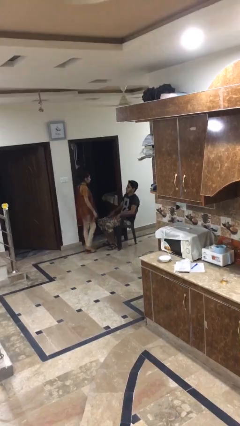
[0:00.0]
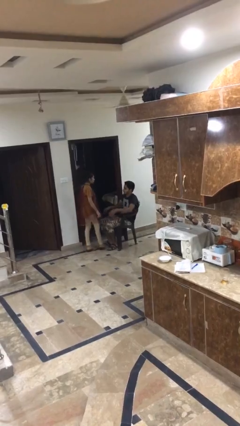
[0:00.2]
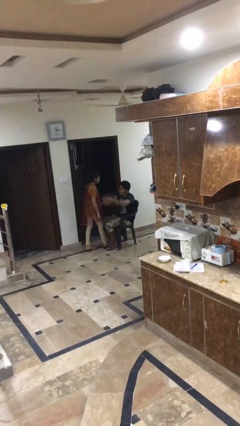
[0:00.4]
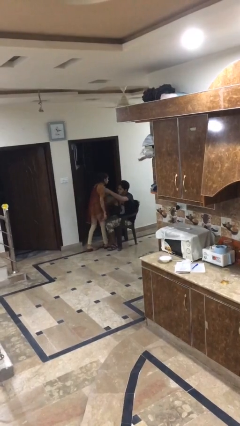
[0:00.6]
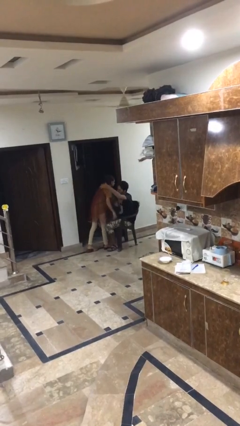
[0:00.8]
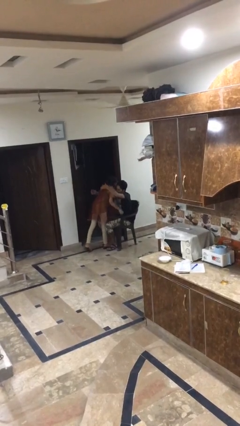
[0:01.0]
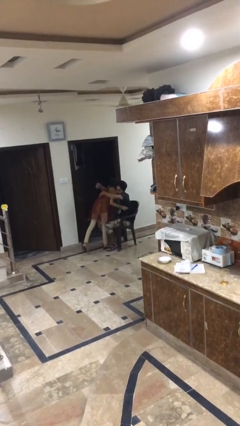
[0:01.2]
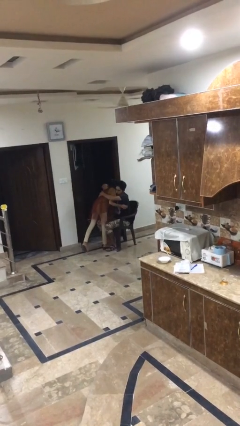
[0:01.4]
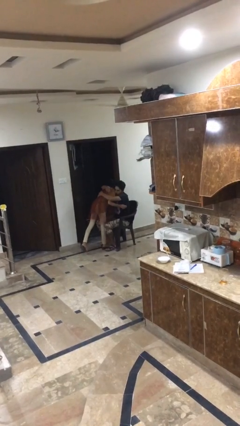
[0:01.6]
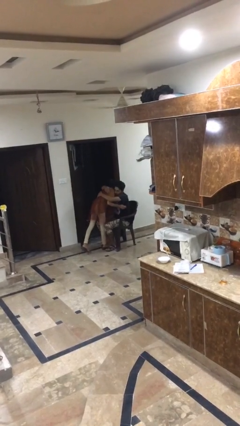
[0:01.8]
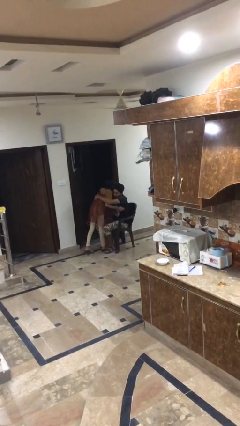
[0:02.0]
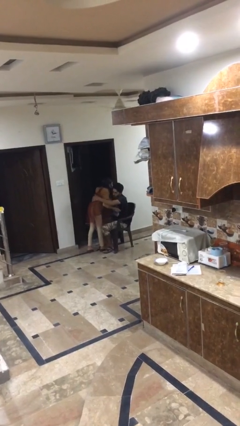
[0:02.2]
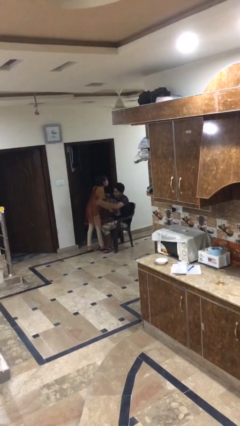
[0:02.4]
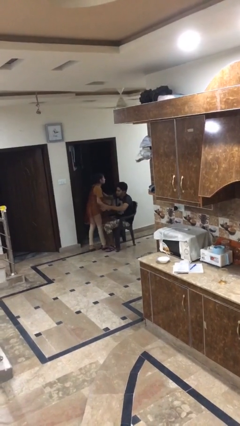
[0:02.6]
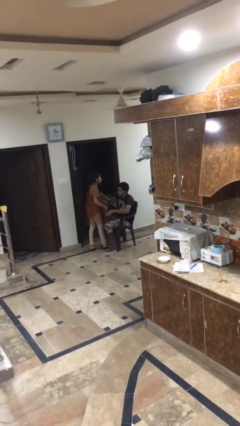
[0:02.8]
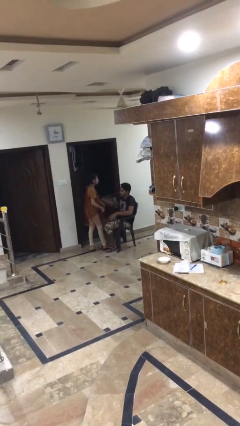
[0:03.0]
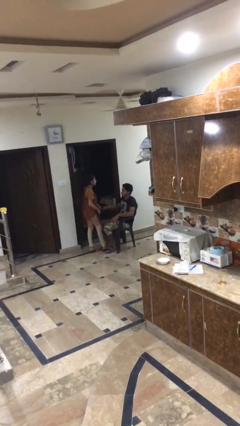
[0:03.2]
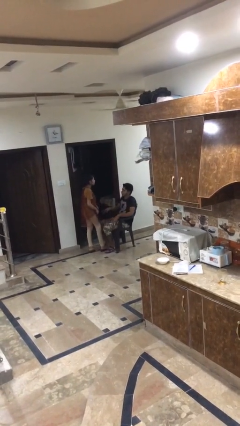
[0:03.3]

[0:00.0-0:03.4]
person embraces person

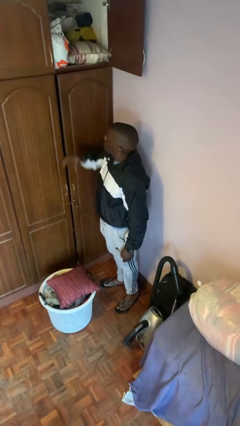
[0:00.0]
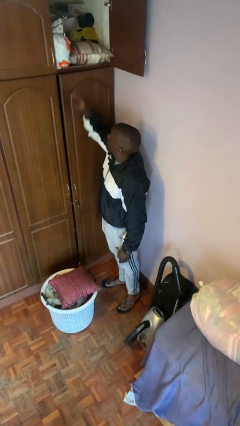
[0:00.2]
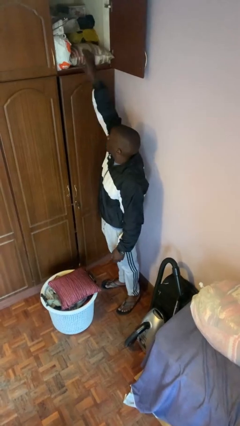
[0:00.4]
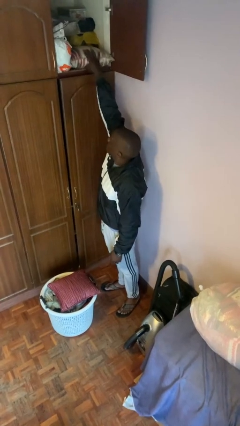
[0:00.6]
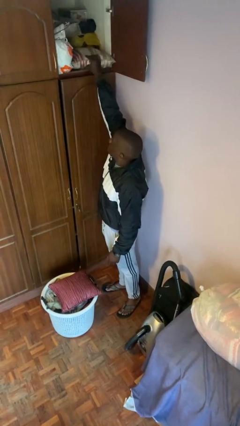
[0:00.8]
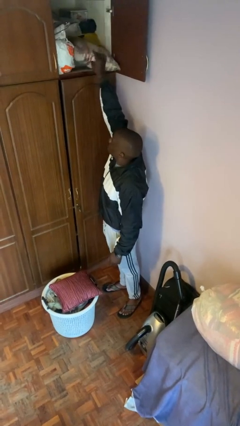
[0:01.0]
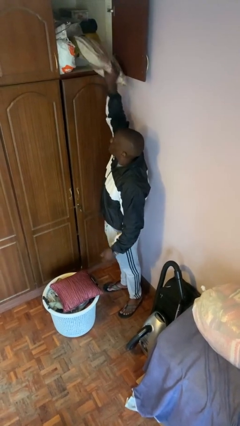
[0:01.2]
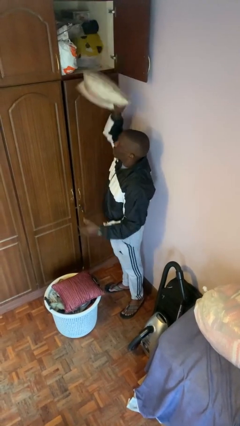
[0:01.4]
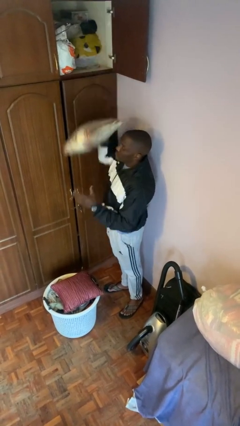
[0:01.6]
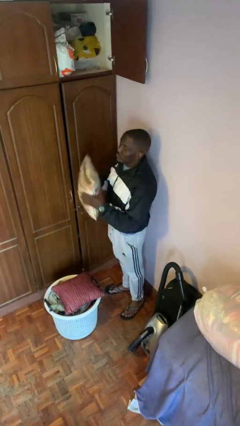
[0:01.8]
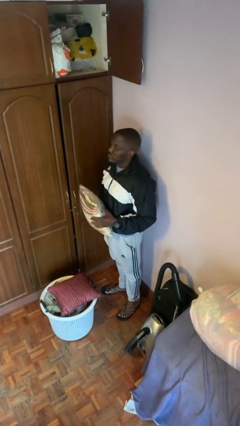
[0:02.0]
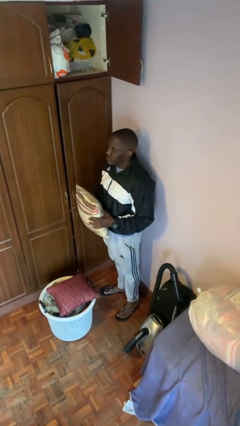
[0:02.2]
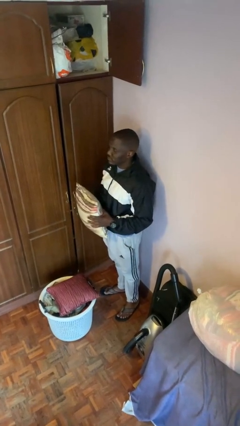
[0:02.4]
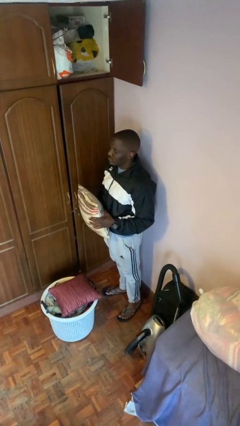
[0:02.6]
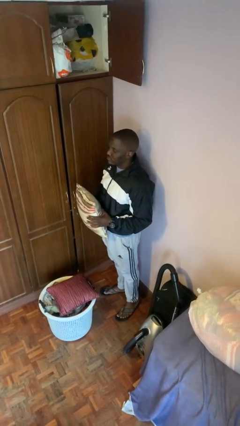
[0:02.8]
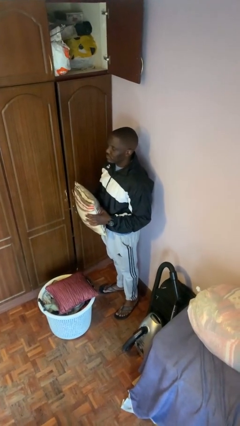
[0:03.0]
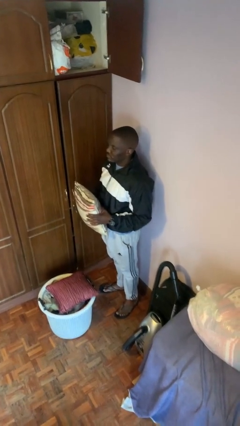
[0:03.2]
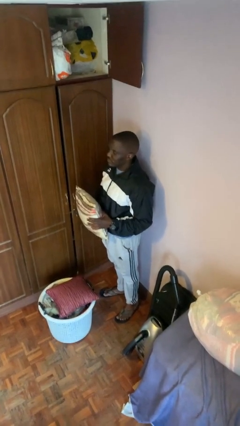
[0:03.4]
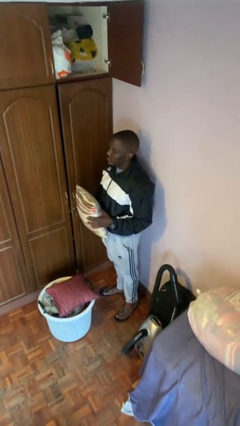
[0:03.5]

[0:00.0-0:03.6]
person picks up object from shelf

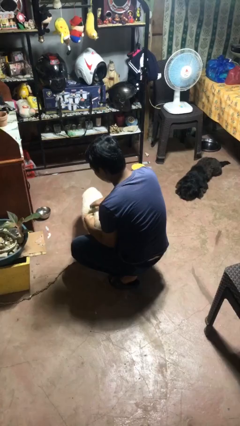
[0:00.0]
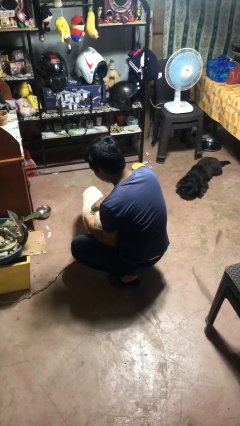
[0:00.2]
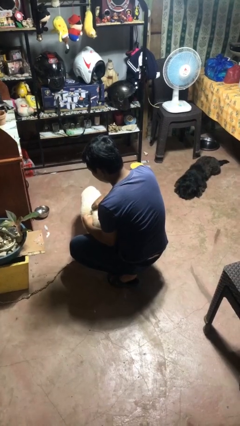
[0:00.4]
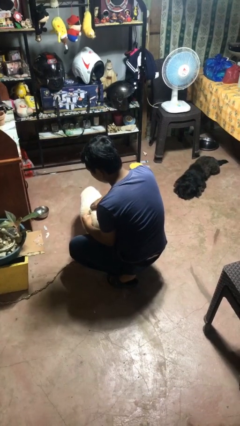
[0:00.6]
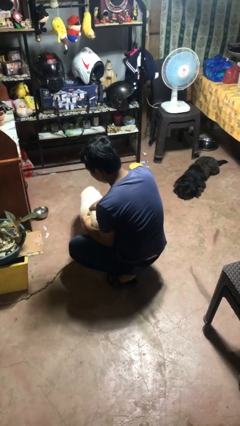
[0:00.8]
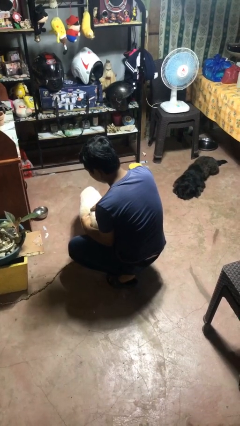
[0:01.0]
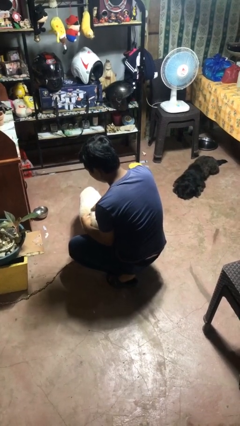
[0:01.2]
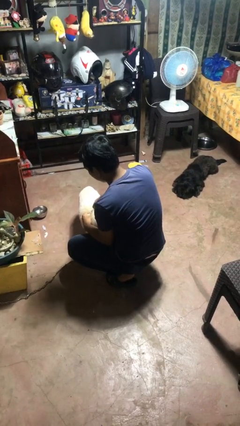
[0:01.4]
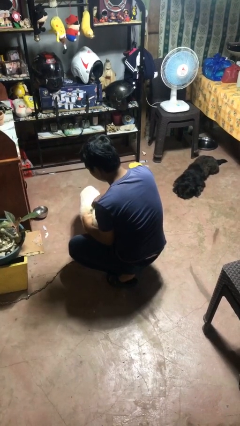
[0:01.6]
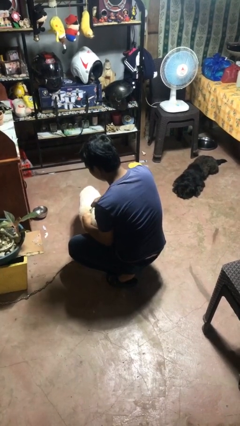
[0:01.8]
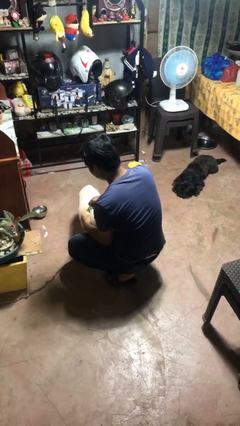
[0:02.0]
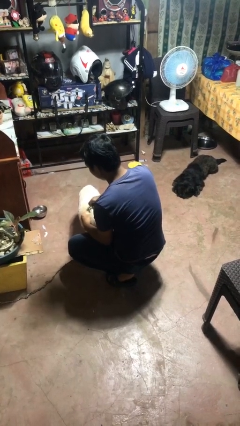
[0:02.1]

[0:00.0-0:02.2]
person attaches leash to dog

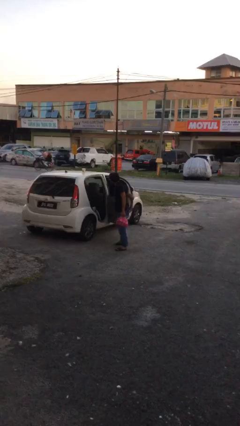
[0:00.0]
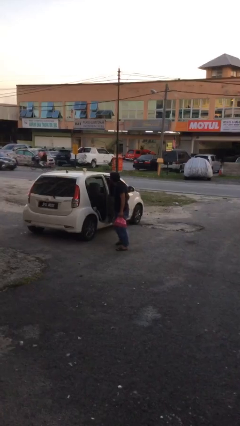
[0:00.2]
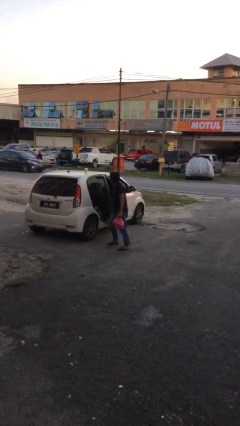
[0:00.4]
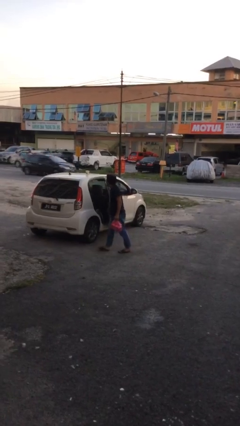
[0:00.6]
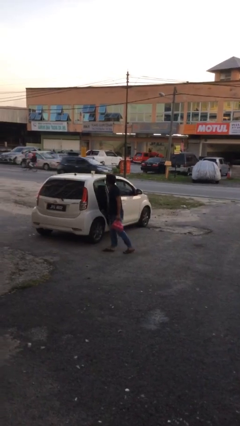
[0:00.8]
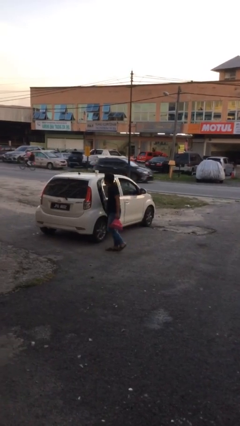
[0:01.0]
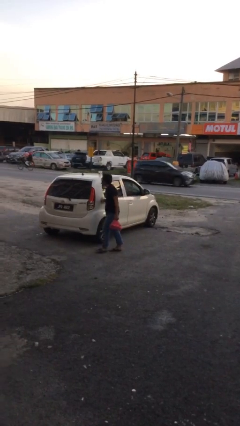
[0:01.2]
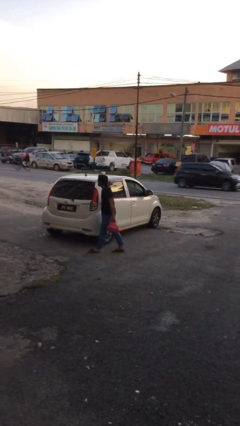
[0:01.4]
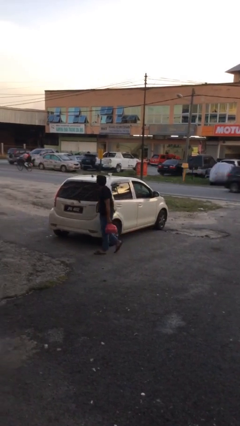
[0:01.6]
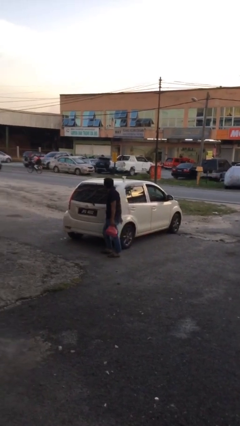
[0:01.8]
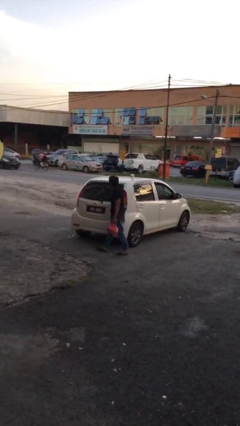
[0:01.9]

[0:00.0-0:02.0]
person closes car door

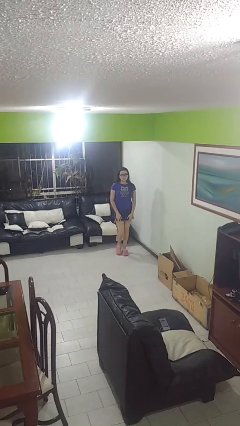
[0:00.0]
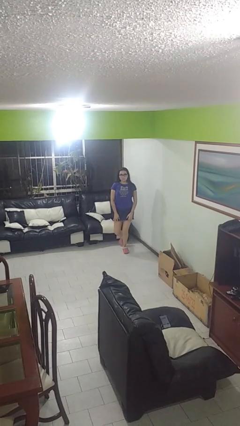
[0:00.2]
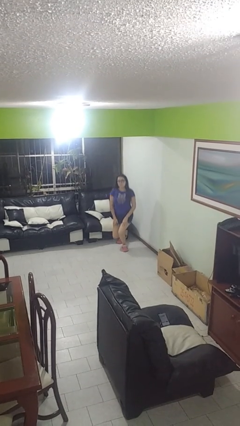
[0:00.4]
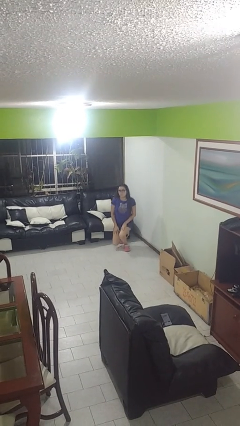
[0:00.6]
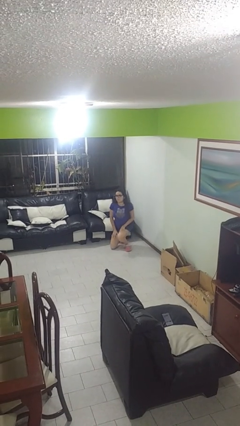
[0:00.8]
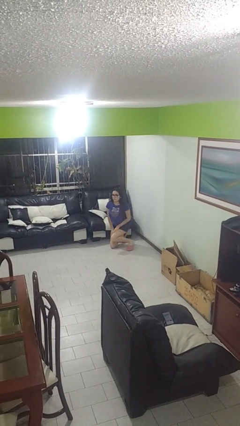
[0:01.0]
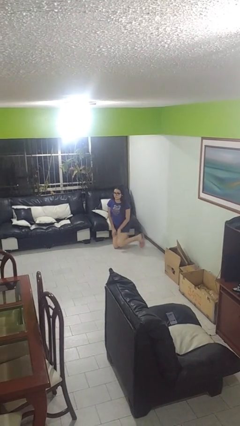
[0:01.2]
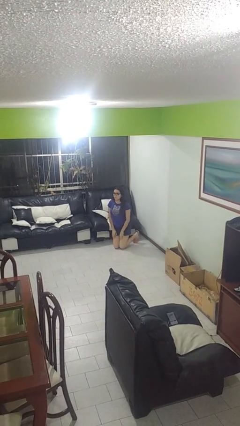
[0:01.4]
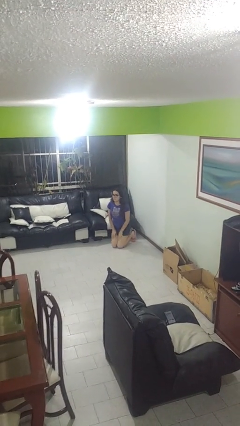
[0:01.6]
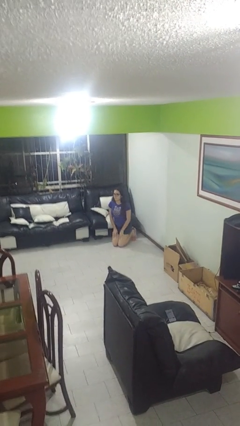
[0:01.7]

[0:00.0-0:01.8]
person kneels

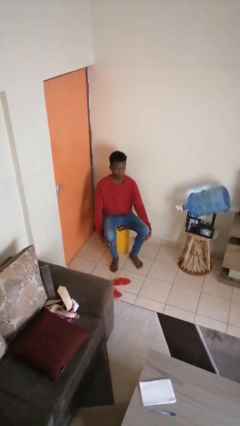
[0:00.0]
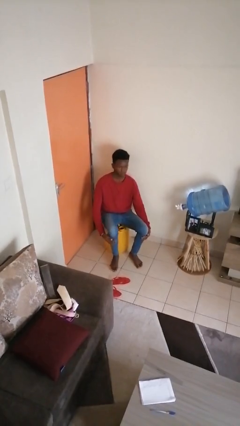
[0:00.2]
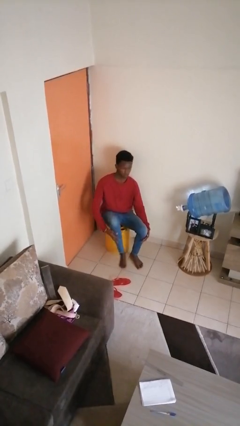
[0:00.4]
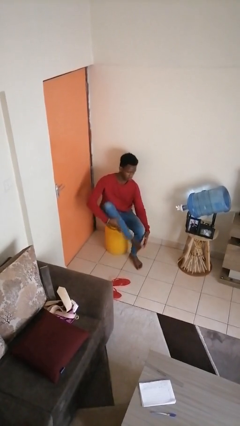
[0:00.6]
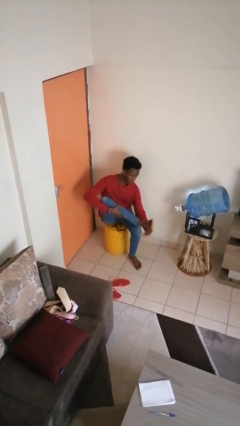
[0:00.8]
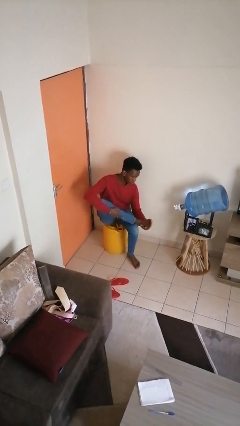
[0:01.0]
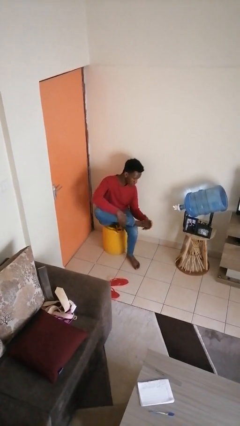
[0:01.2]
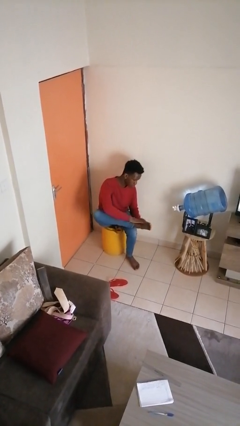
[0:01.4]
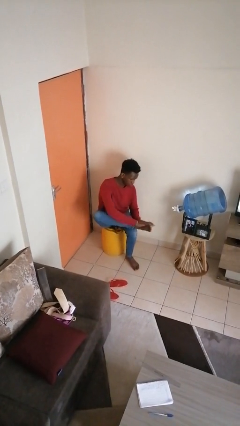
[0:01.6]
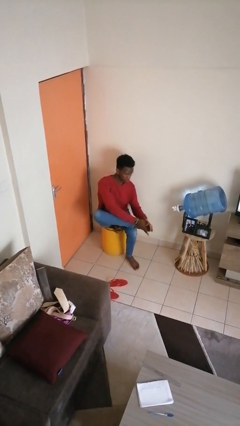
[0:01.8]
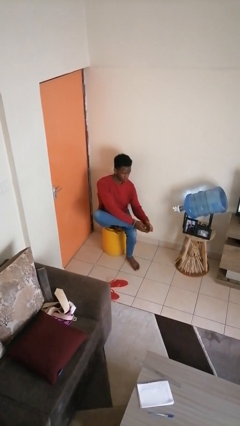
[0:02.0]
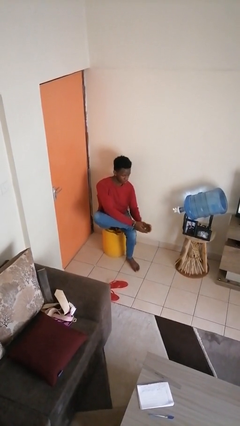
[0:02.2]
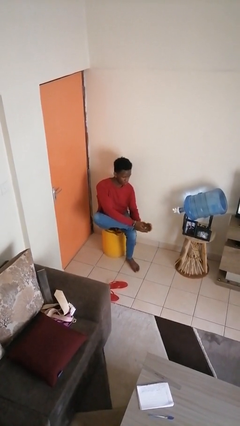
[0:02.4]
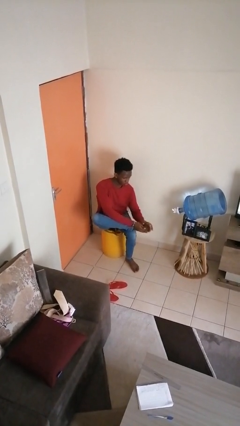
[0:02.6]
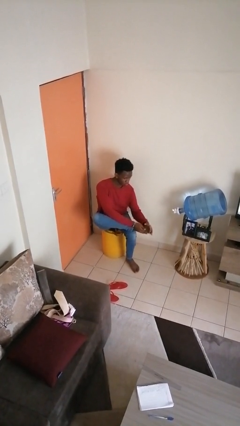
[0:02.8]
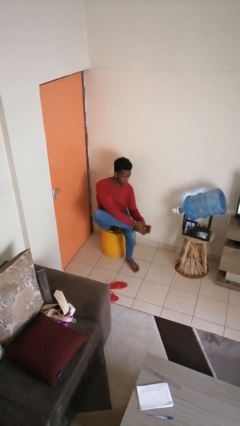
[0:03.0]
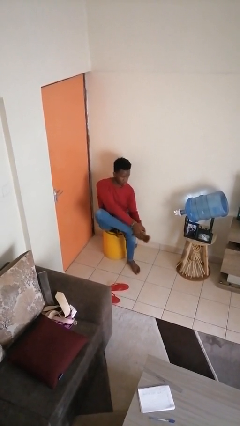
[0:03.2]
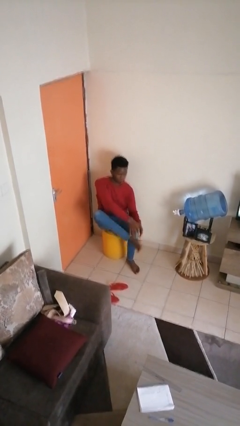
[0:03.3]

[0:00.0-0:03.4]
person rubs foot

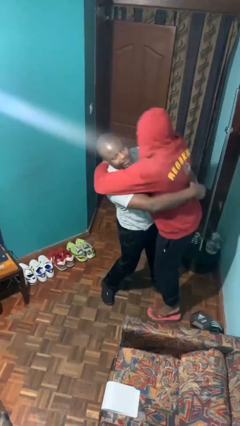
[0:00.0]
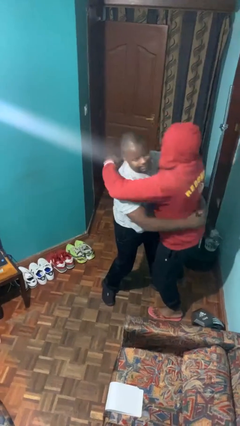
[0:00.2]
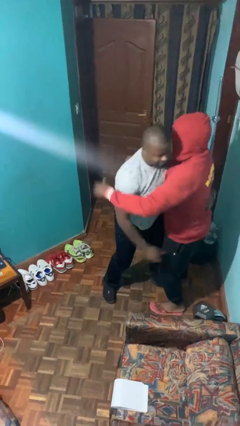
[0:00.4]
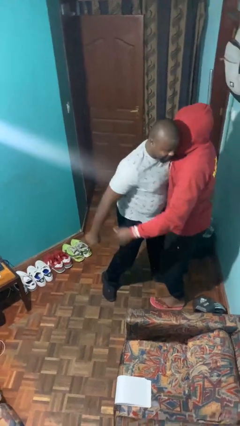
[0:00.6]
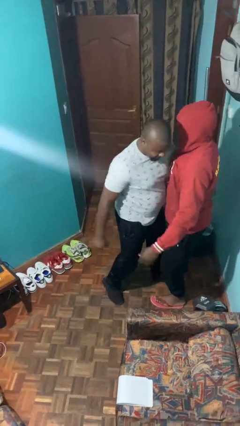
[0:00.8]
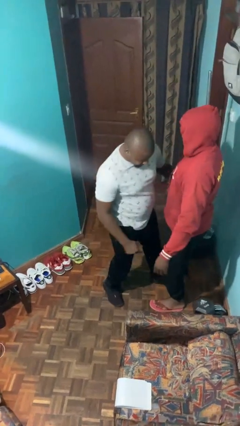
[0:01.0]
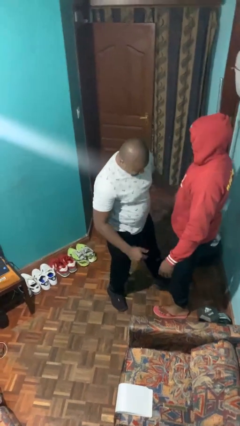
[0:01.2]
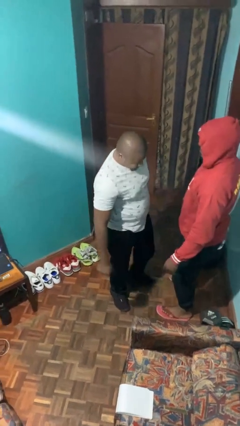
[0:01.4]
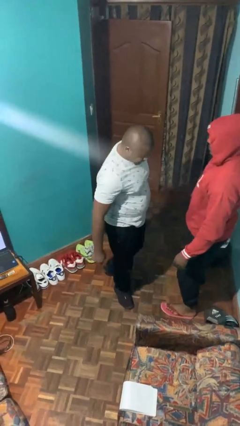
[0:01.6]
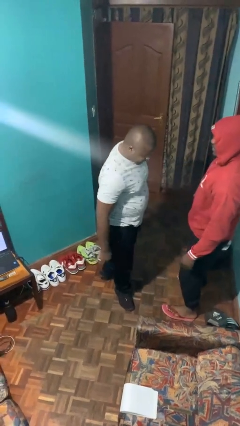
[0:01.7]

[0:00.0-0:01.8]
person puts down person
